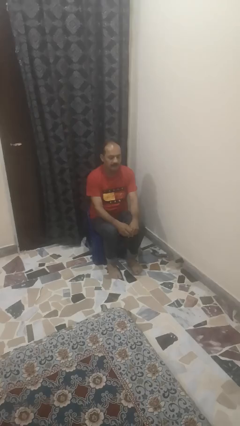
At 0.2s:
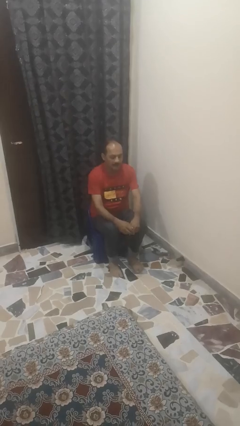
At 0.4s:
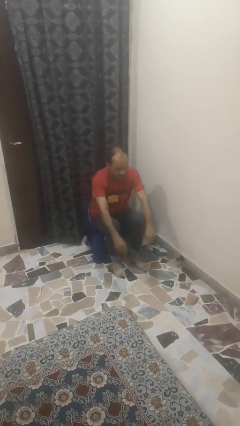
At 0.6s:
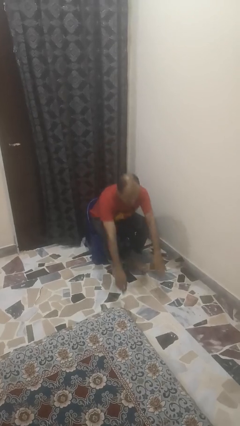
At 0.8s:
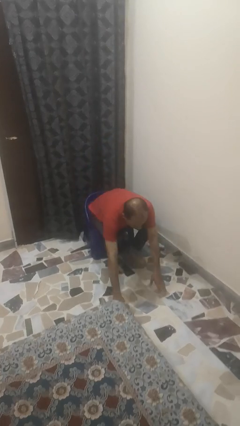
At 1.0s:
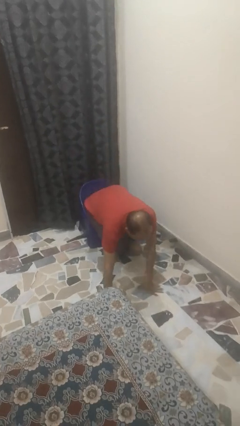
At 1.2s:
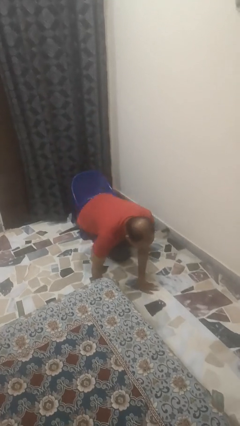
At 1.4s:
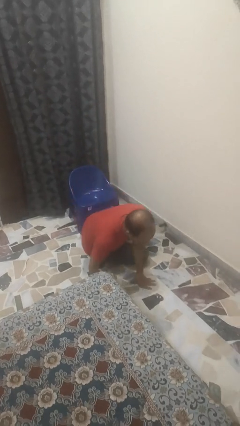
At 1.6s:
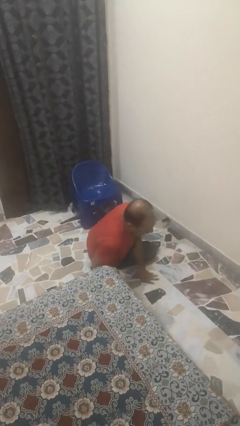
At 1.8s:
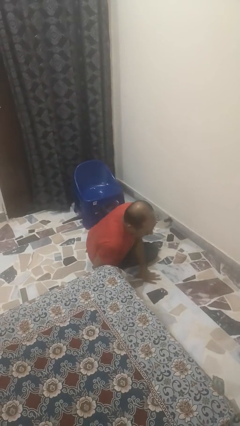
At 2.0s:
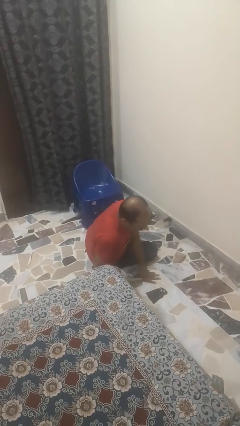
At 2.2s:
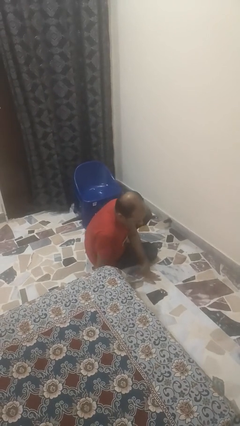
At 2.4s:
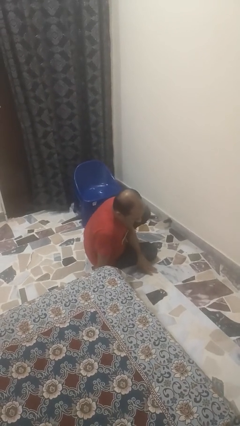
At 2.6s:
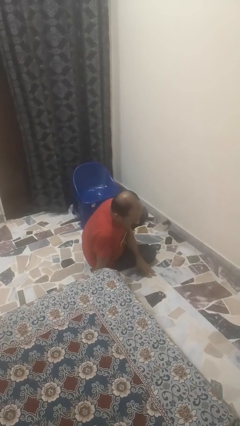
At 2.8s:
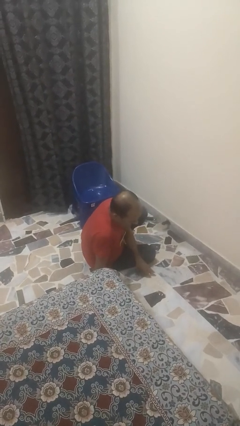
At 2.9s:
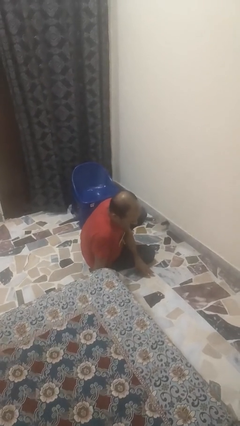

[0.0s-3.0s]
person falls from chair

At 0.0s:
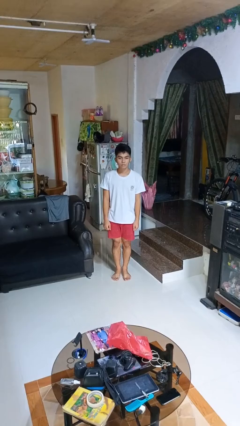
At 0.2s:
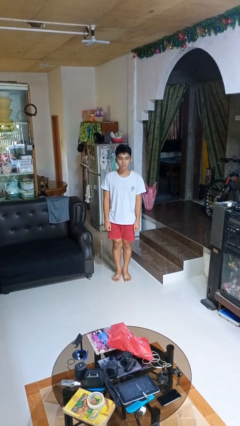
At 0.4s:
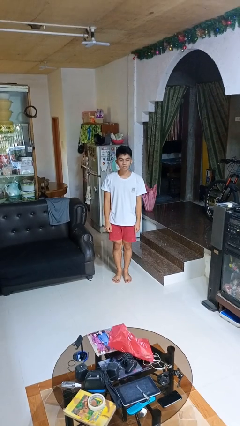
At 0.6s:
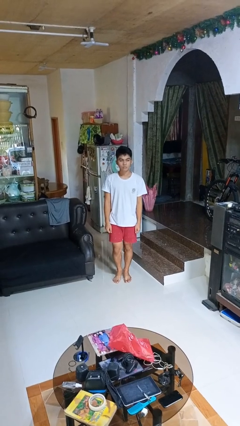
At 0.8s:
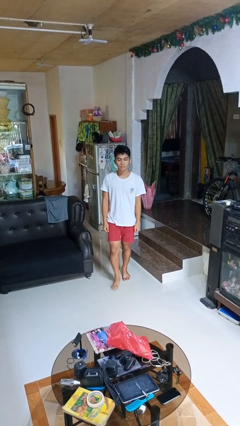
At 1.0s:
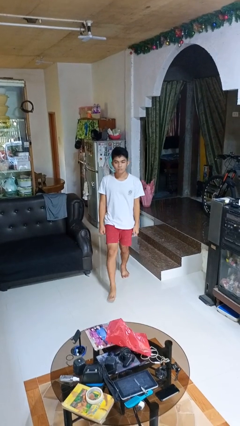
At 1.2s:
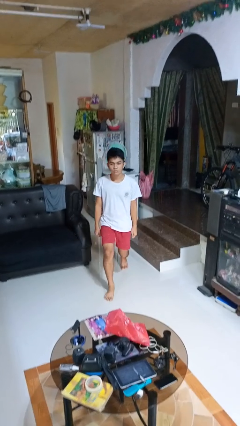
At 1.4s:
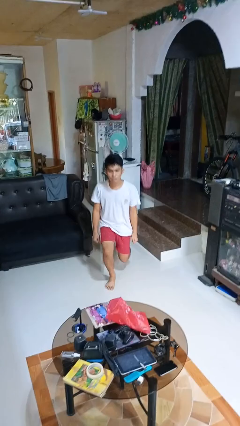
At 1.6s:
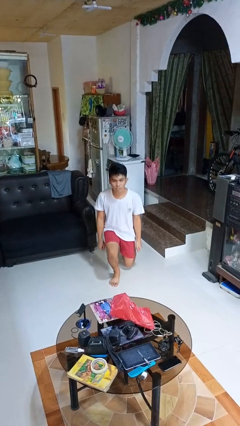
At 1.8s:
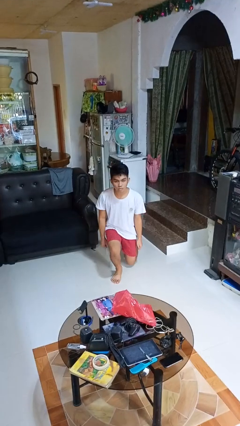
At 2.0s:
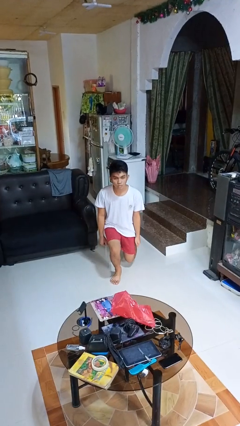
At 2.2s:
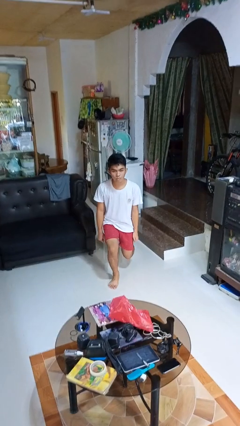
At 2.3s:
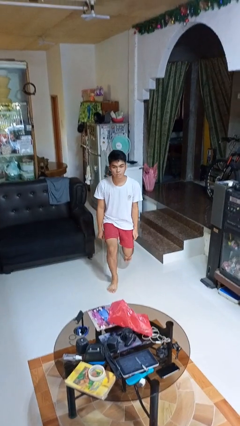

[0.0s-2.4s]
person exercises with lunges

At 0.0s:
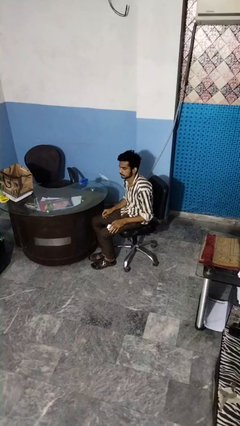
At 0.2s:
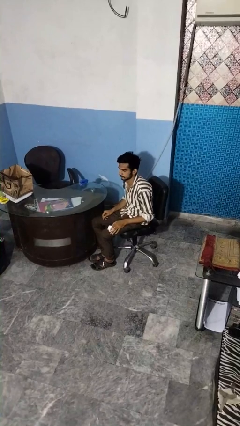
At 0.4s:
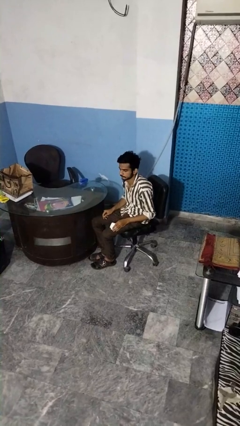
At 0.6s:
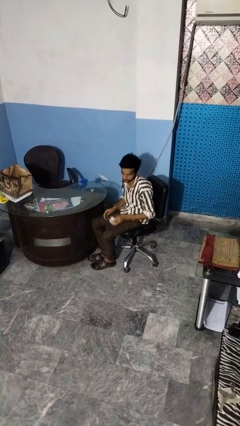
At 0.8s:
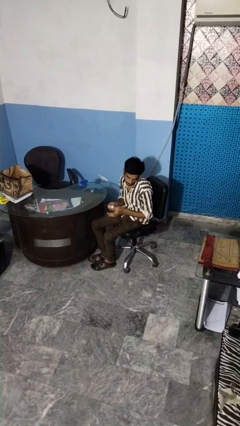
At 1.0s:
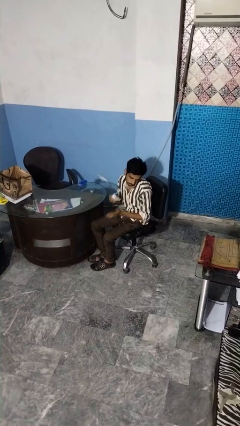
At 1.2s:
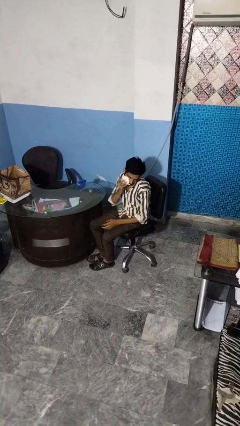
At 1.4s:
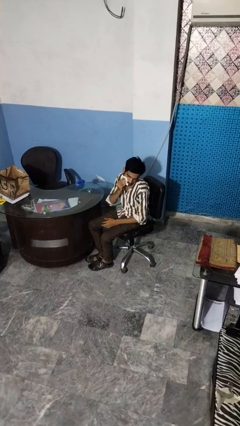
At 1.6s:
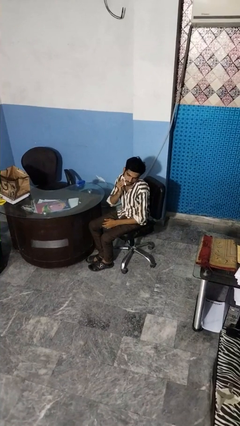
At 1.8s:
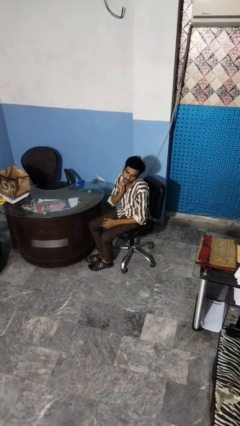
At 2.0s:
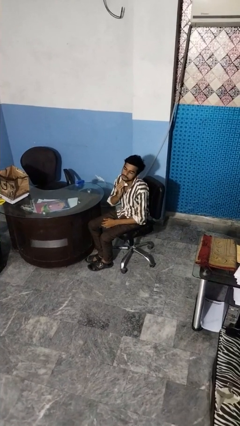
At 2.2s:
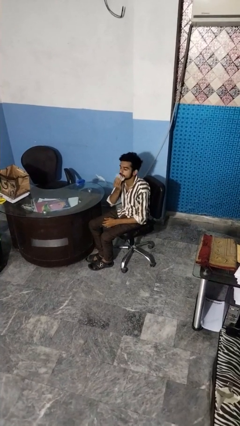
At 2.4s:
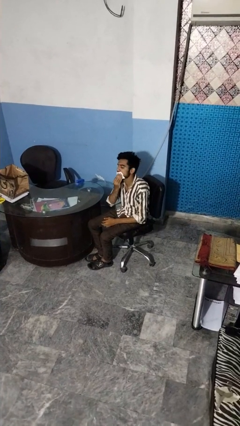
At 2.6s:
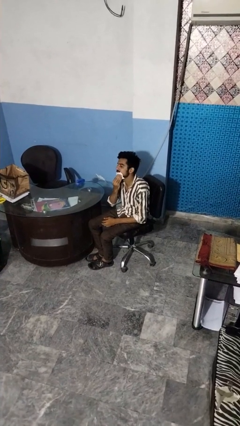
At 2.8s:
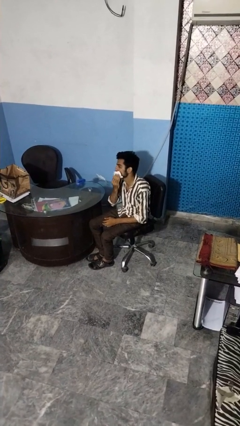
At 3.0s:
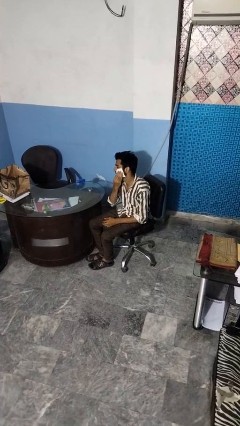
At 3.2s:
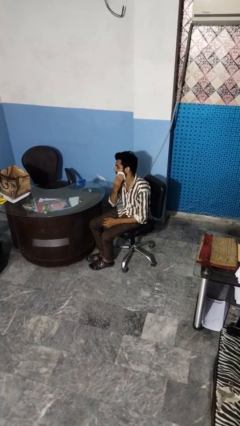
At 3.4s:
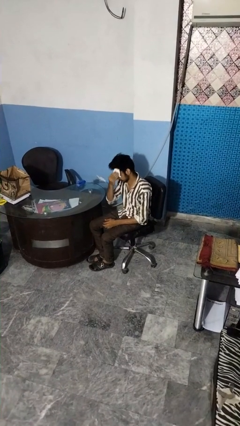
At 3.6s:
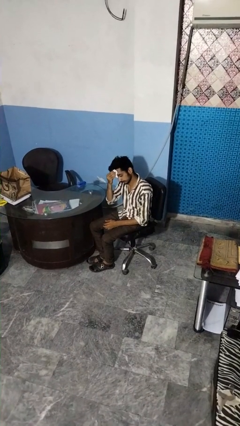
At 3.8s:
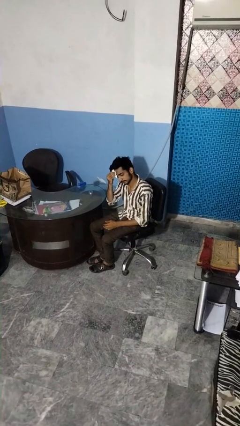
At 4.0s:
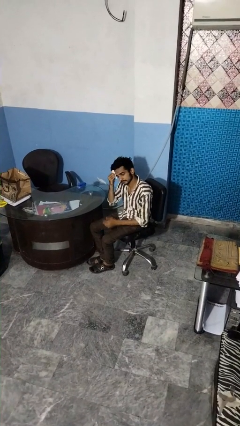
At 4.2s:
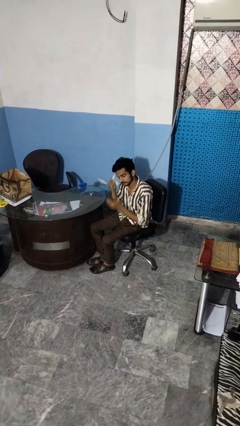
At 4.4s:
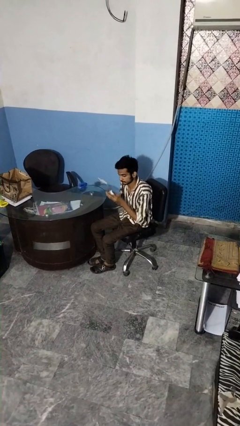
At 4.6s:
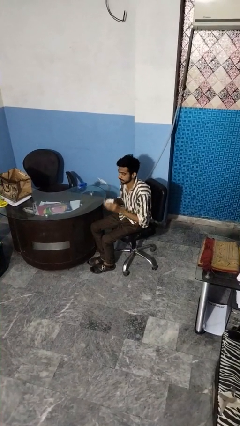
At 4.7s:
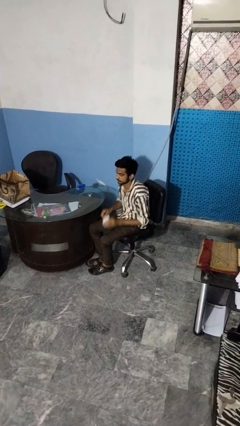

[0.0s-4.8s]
person wipes mouth with napkin

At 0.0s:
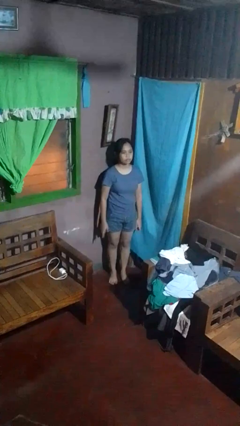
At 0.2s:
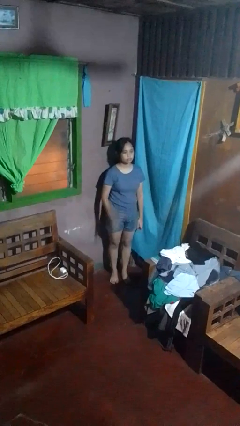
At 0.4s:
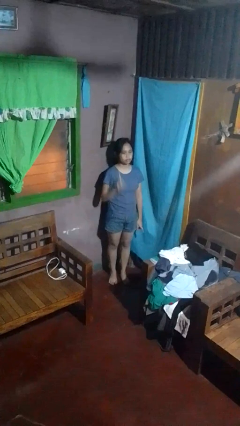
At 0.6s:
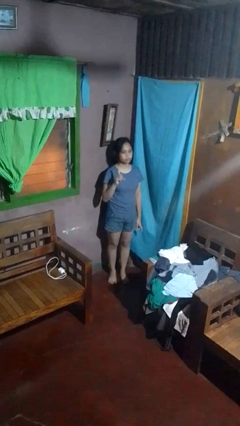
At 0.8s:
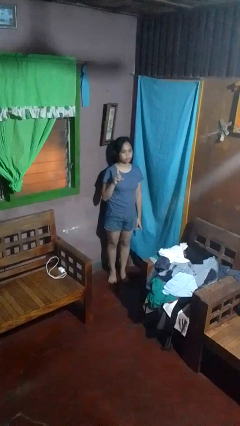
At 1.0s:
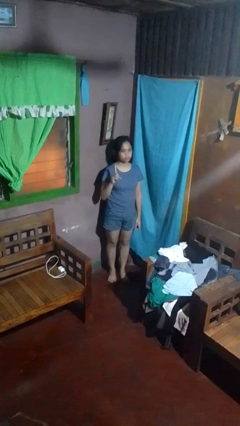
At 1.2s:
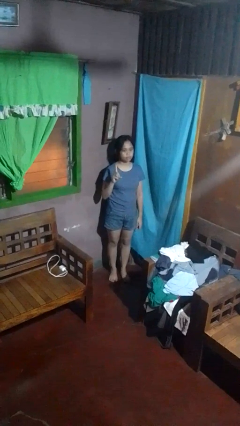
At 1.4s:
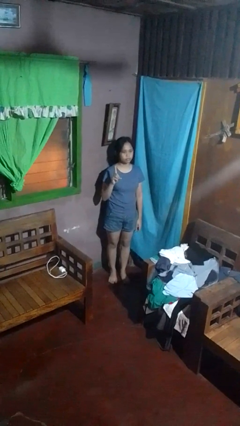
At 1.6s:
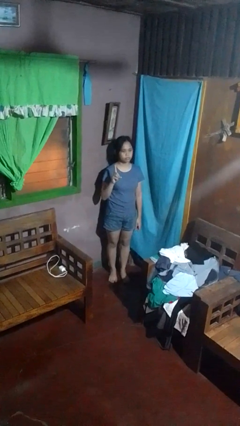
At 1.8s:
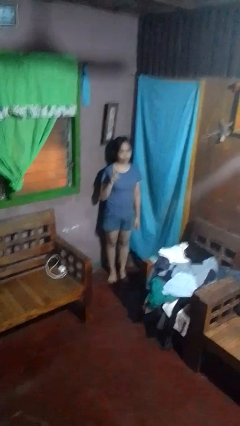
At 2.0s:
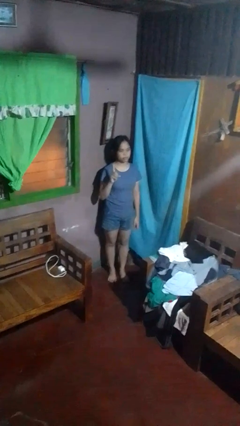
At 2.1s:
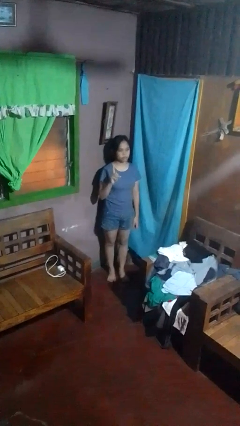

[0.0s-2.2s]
person gestures number one

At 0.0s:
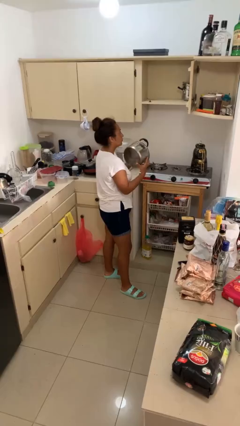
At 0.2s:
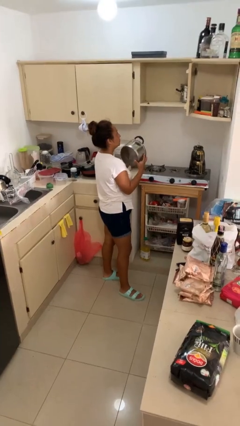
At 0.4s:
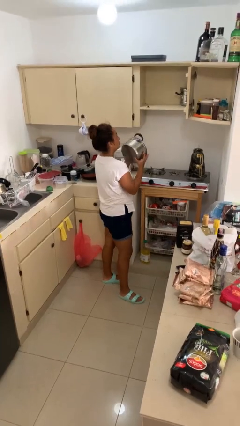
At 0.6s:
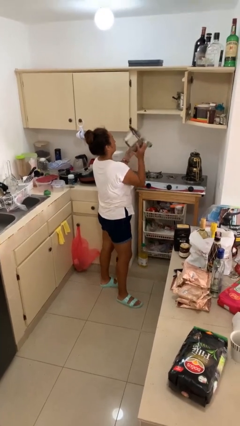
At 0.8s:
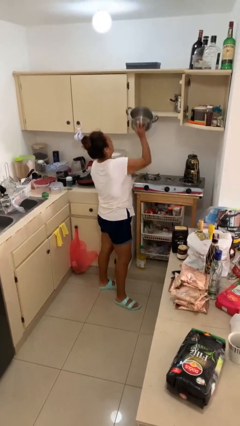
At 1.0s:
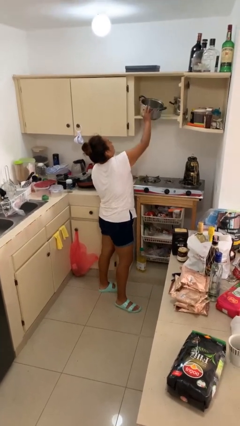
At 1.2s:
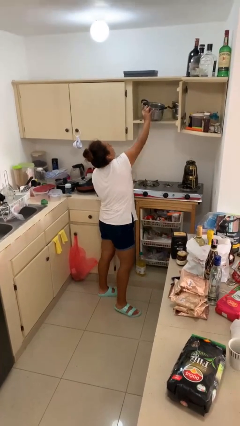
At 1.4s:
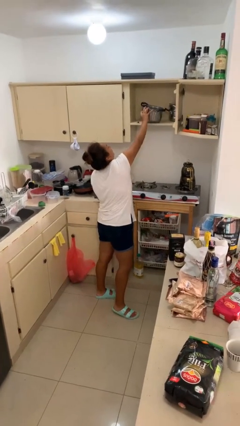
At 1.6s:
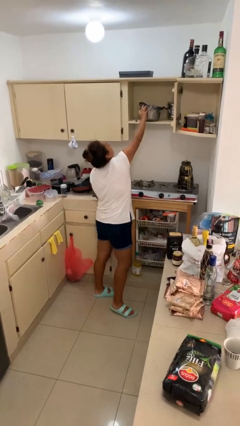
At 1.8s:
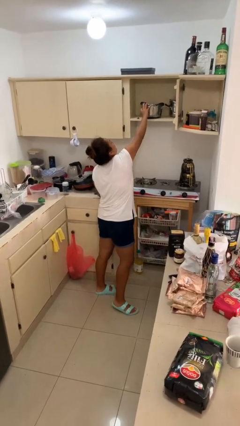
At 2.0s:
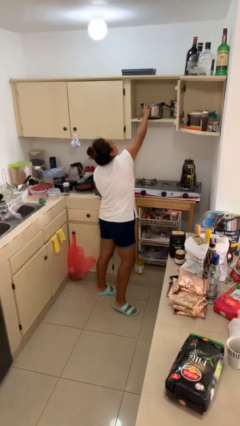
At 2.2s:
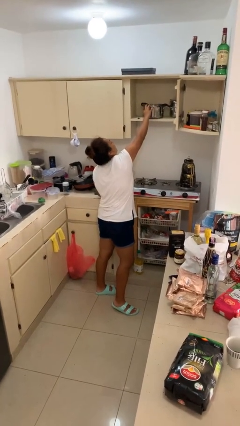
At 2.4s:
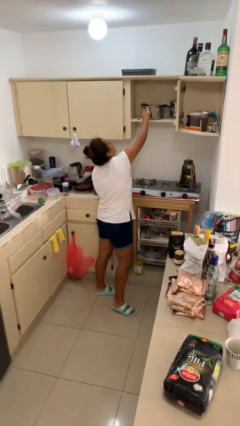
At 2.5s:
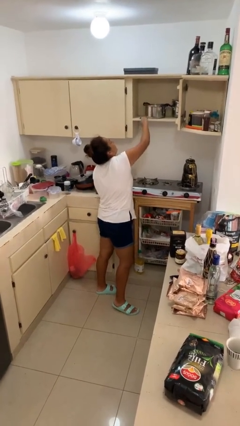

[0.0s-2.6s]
person puts down object into cabinet

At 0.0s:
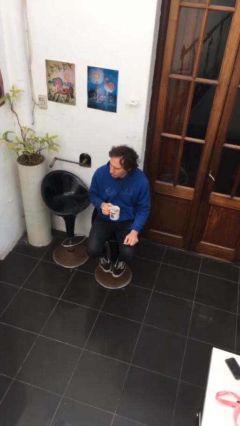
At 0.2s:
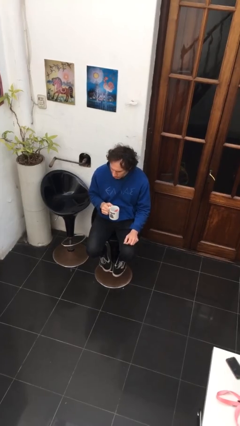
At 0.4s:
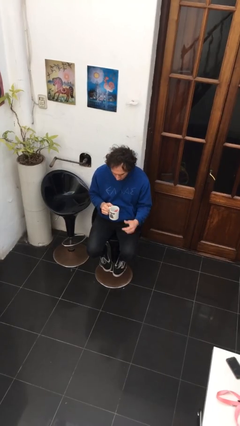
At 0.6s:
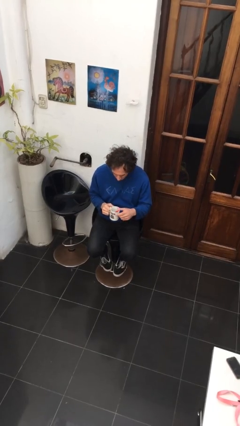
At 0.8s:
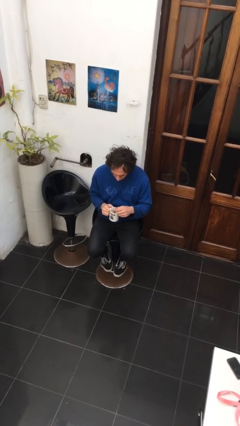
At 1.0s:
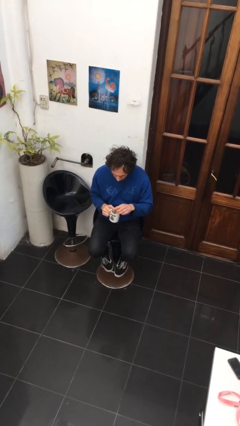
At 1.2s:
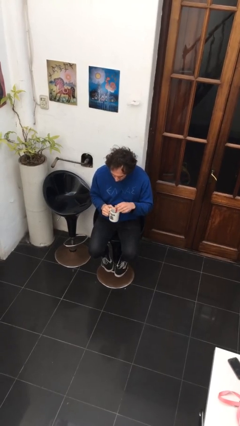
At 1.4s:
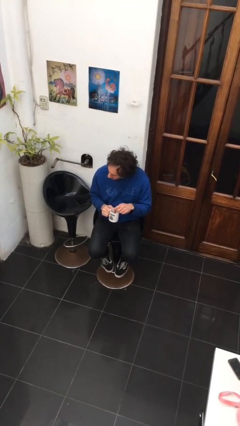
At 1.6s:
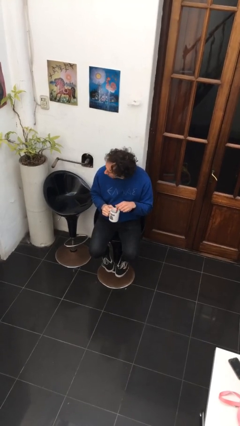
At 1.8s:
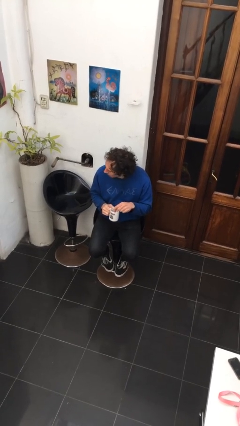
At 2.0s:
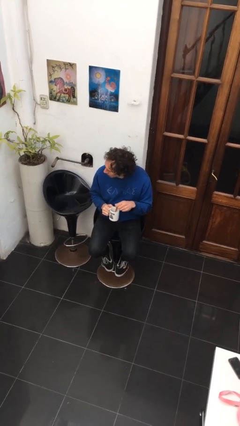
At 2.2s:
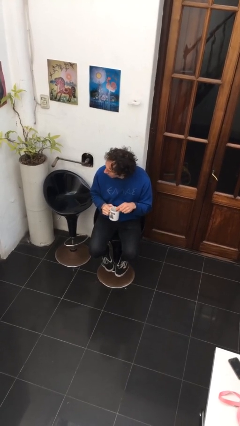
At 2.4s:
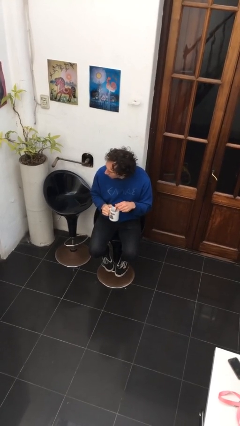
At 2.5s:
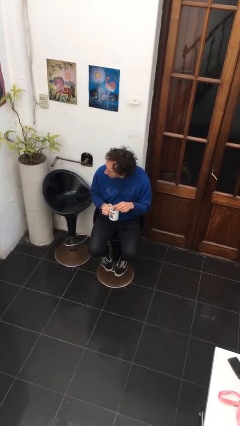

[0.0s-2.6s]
person stirs mug
